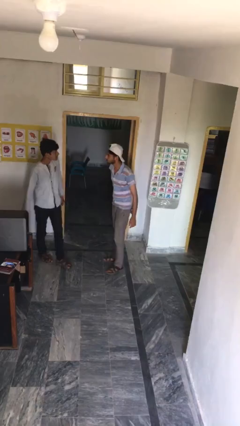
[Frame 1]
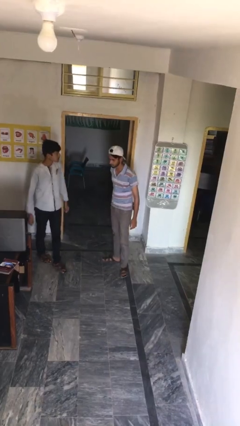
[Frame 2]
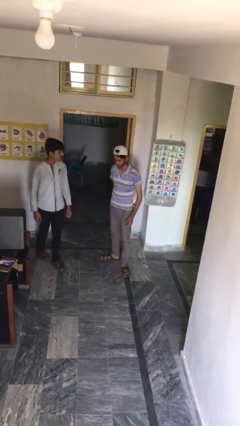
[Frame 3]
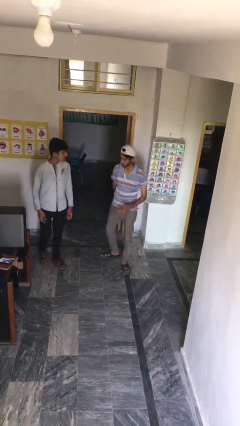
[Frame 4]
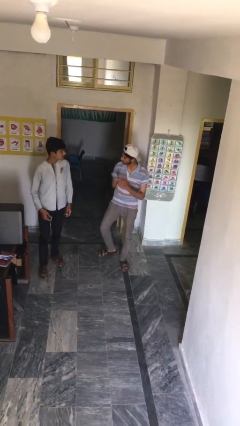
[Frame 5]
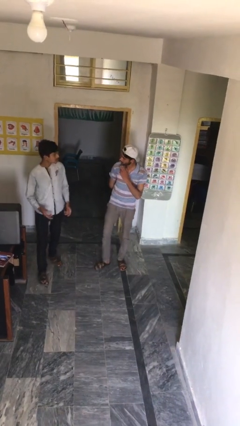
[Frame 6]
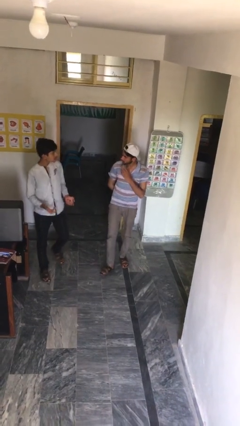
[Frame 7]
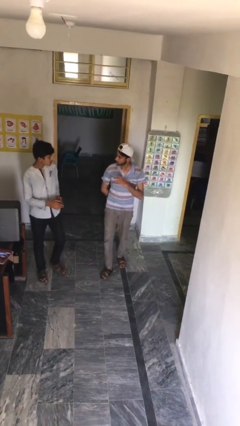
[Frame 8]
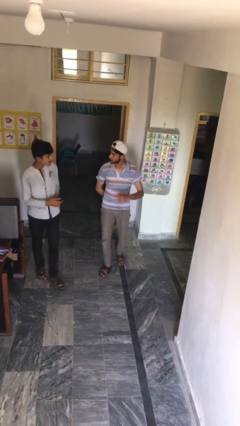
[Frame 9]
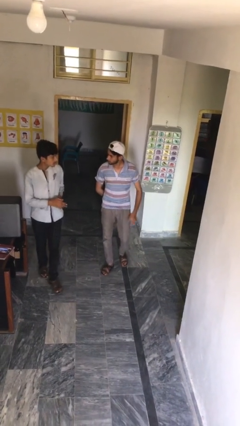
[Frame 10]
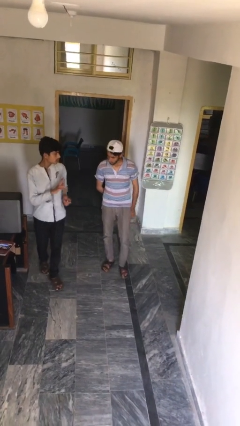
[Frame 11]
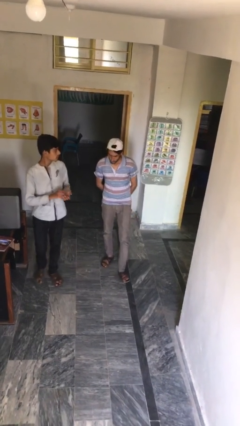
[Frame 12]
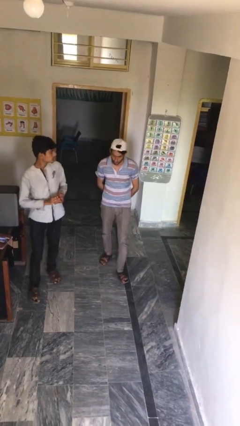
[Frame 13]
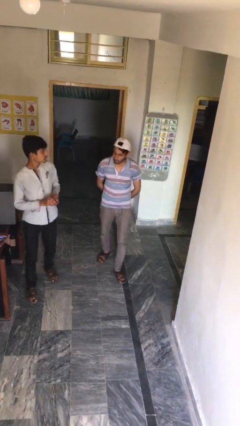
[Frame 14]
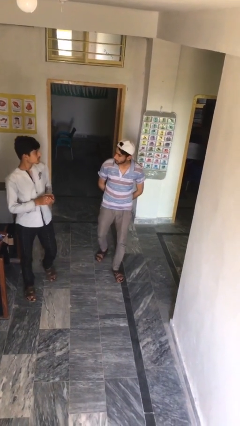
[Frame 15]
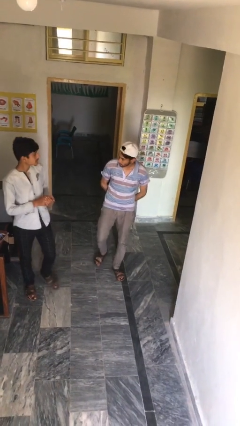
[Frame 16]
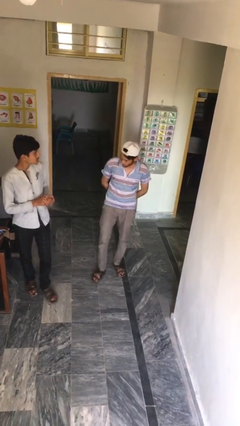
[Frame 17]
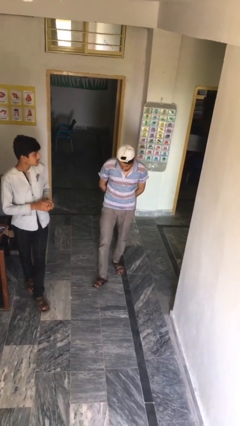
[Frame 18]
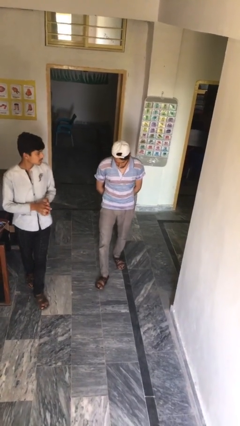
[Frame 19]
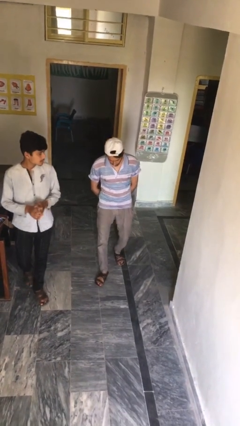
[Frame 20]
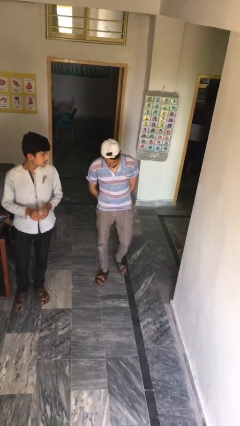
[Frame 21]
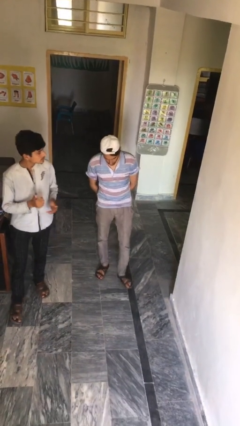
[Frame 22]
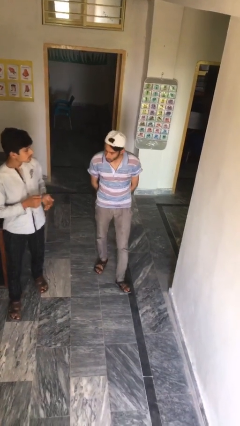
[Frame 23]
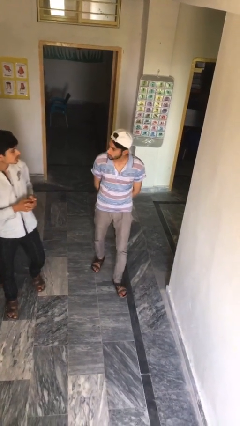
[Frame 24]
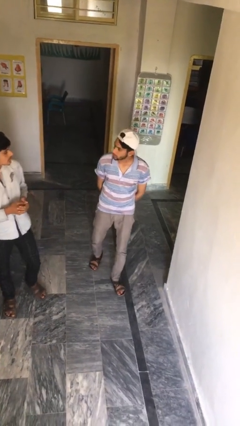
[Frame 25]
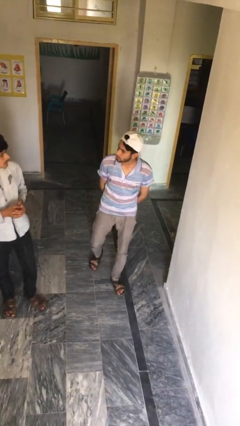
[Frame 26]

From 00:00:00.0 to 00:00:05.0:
person talks to person

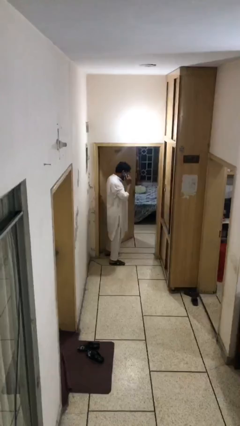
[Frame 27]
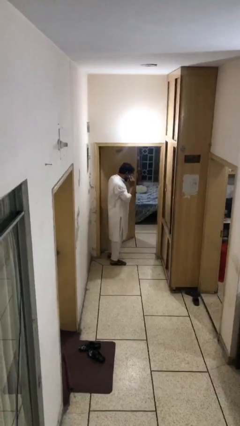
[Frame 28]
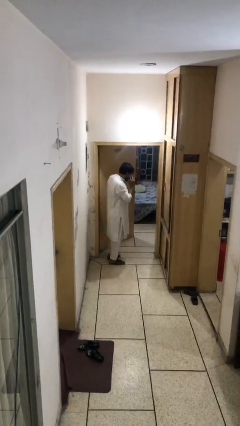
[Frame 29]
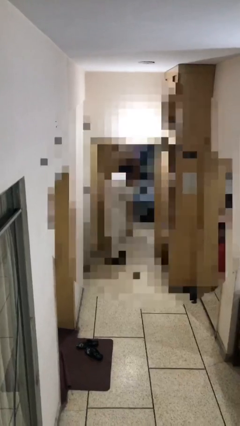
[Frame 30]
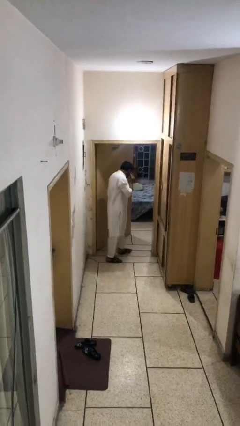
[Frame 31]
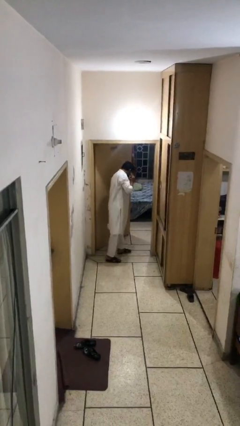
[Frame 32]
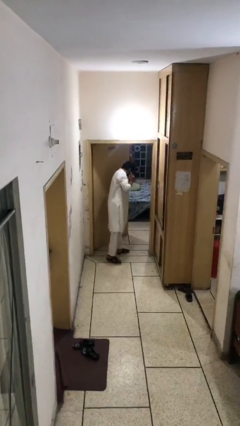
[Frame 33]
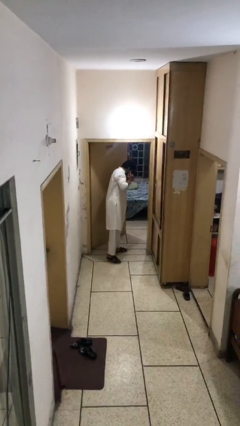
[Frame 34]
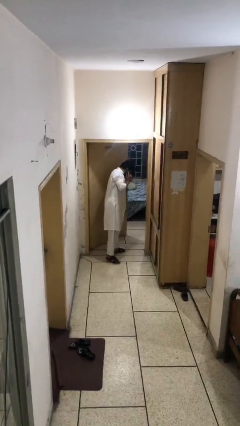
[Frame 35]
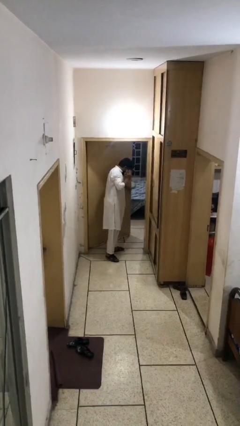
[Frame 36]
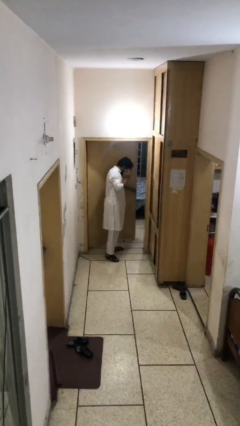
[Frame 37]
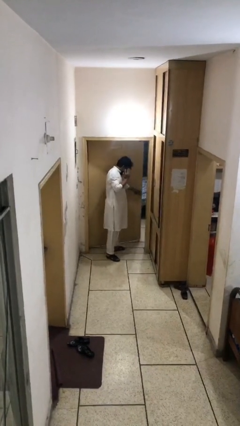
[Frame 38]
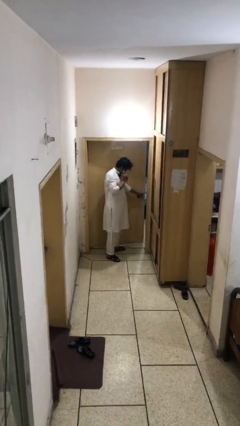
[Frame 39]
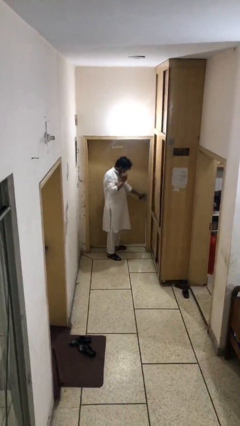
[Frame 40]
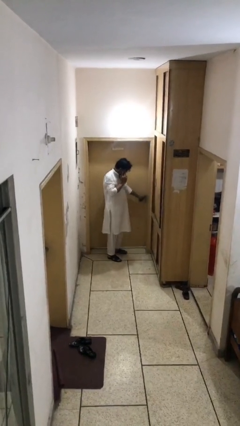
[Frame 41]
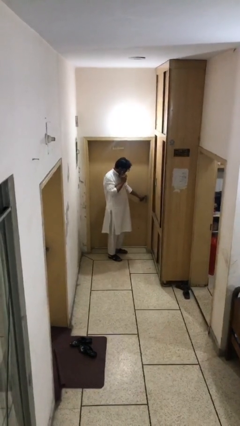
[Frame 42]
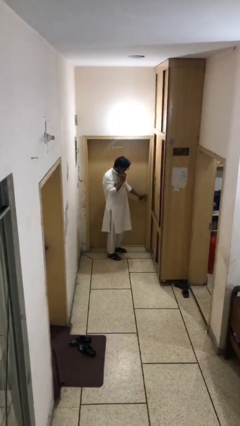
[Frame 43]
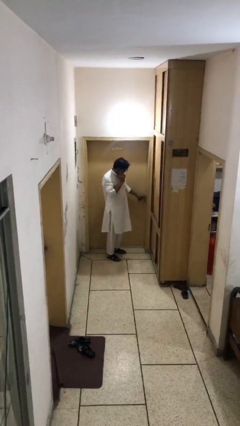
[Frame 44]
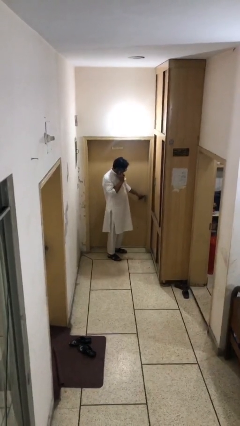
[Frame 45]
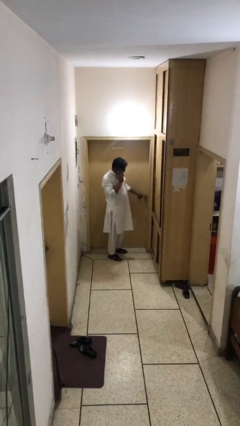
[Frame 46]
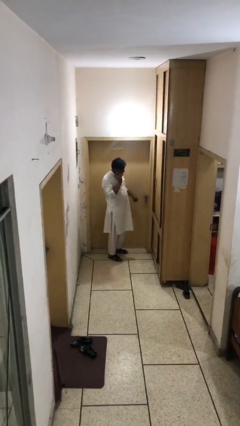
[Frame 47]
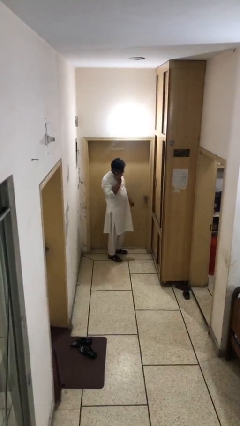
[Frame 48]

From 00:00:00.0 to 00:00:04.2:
person closes facility door

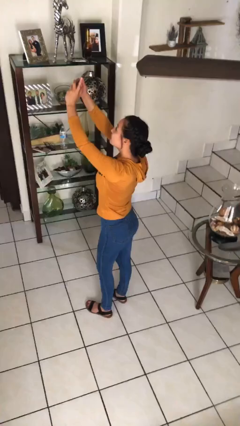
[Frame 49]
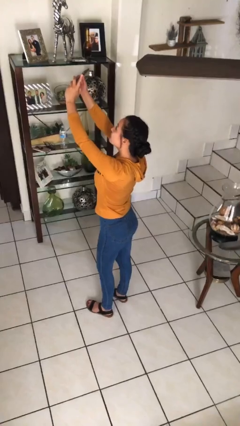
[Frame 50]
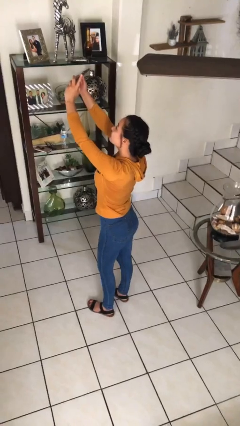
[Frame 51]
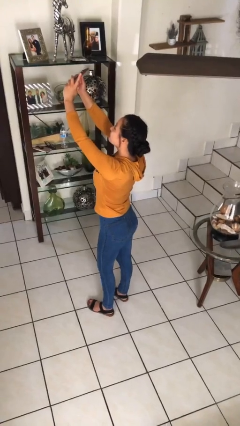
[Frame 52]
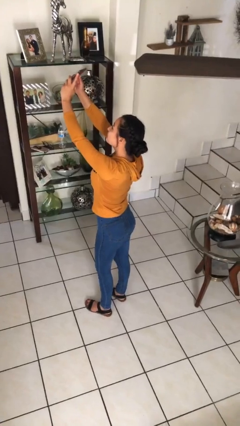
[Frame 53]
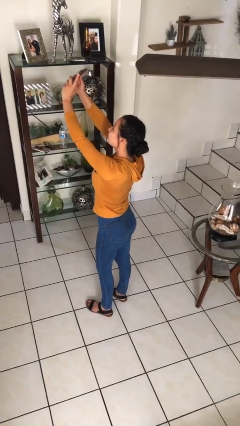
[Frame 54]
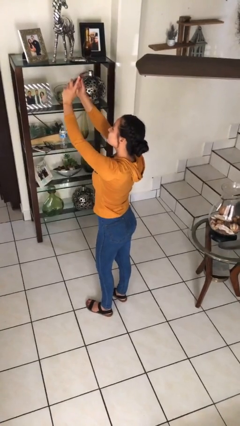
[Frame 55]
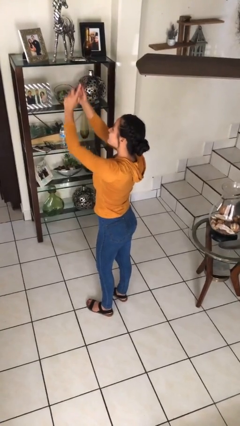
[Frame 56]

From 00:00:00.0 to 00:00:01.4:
person takes selfie

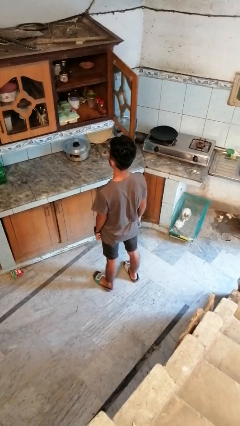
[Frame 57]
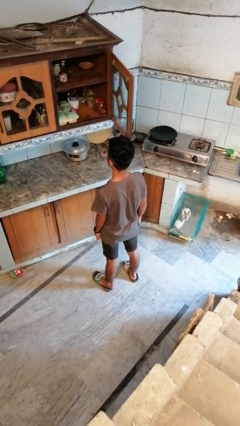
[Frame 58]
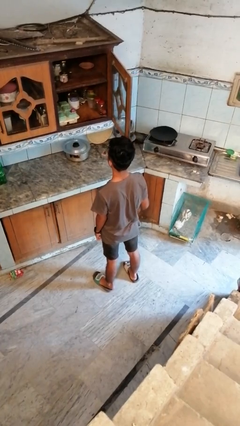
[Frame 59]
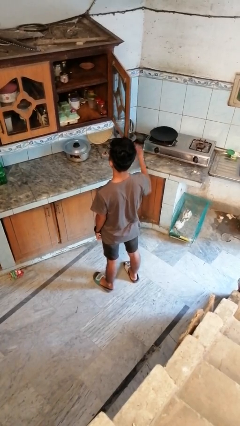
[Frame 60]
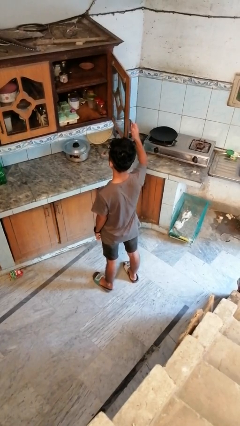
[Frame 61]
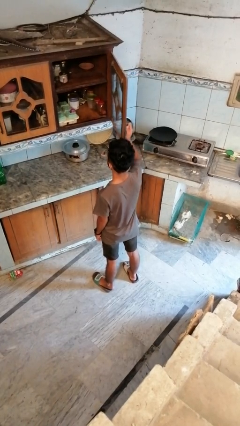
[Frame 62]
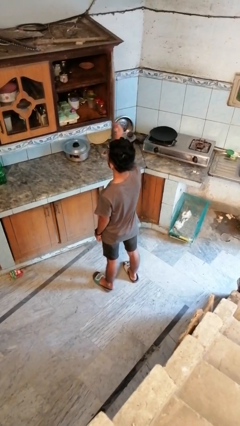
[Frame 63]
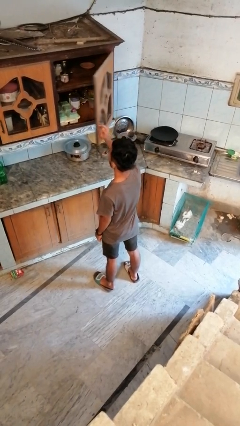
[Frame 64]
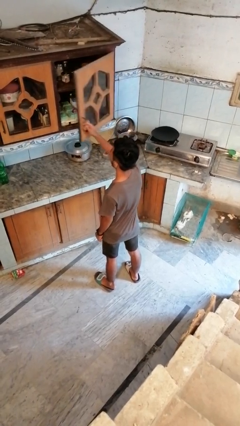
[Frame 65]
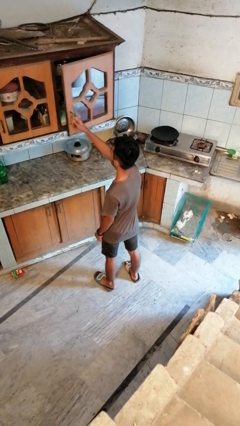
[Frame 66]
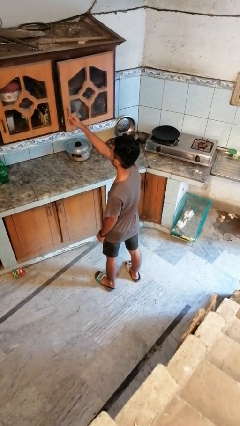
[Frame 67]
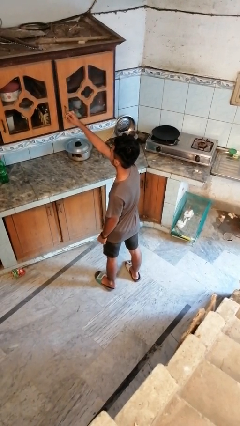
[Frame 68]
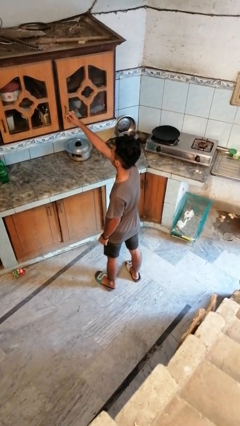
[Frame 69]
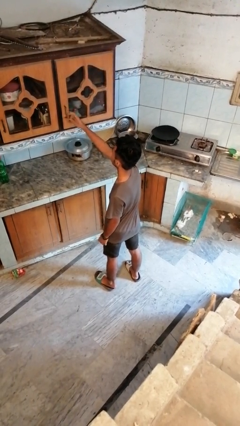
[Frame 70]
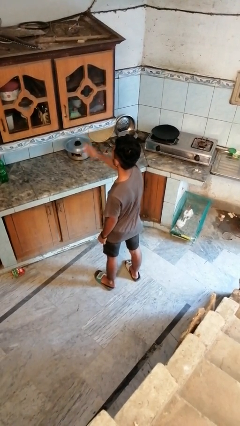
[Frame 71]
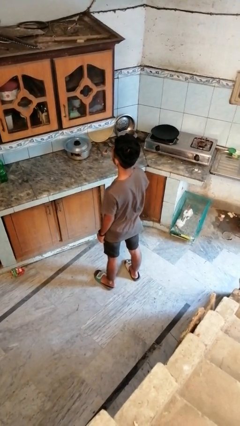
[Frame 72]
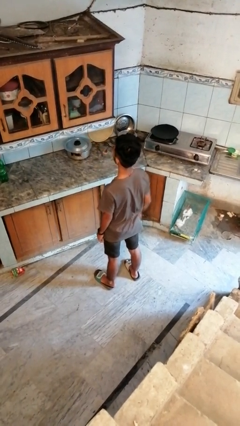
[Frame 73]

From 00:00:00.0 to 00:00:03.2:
person closes cabinet

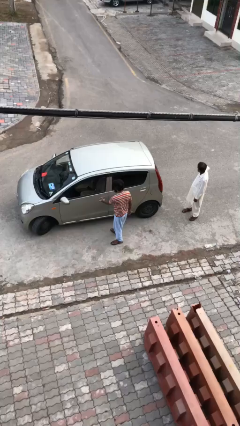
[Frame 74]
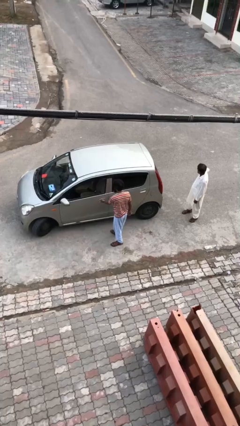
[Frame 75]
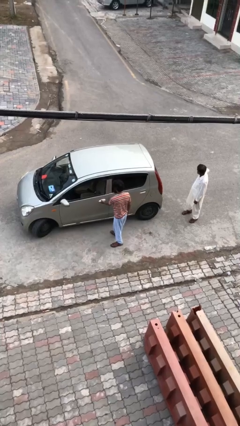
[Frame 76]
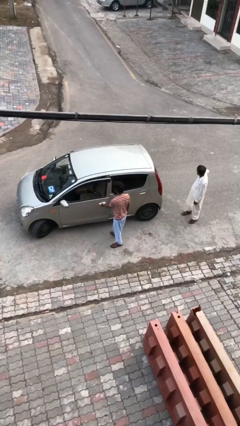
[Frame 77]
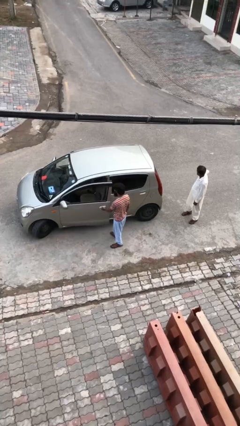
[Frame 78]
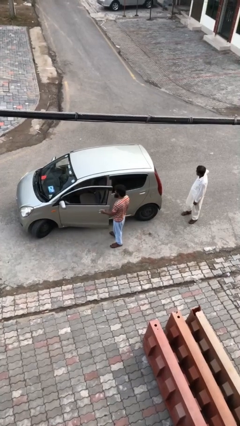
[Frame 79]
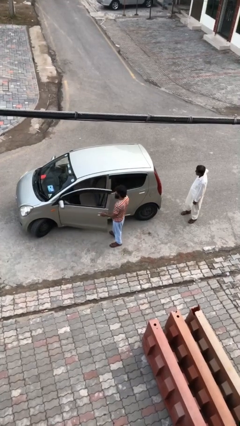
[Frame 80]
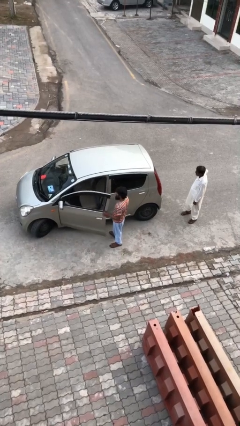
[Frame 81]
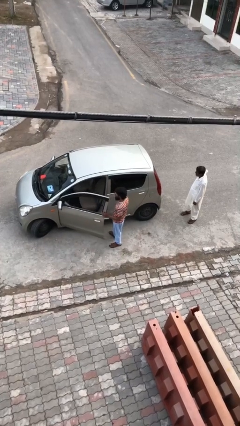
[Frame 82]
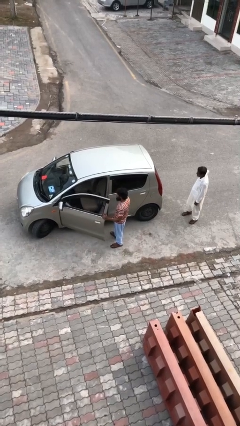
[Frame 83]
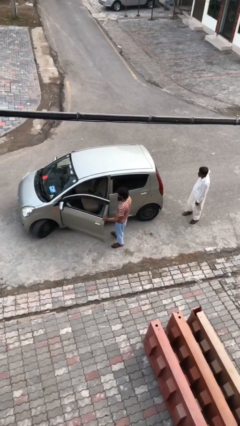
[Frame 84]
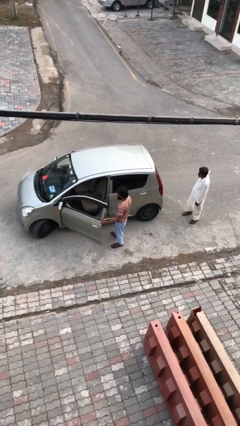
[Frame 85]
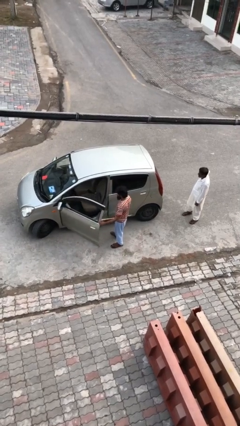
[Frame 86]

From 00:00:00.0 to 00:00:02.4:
person opens car door

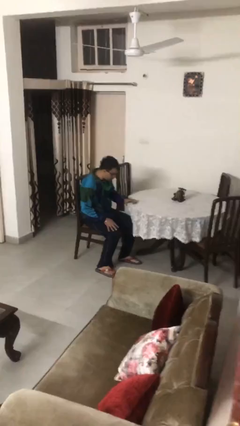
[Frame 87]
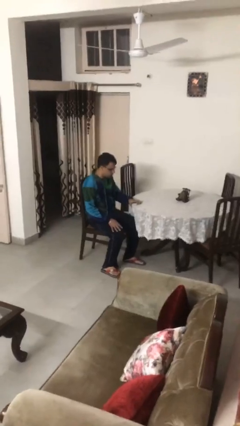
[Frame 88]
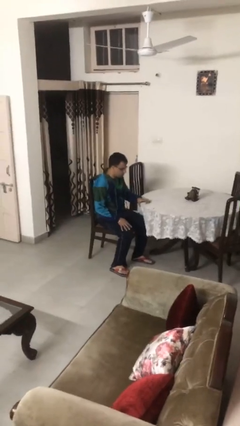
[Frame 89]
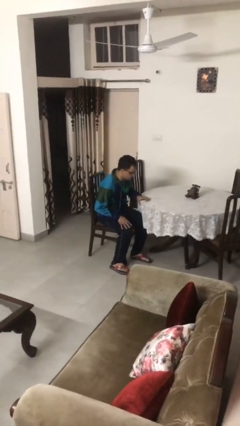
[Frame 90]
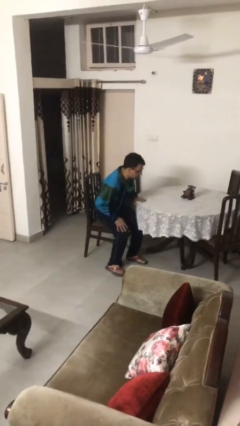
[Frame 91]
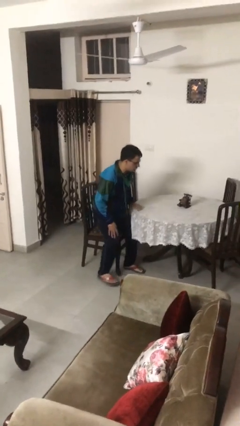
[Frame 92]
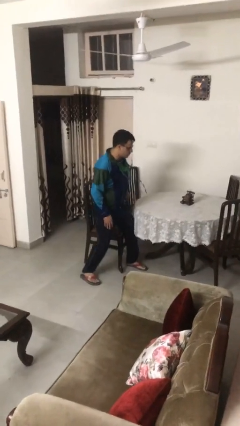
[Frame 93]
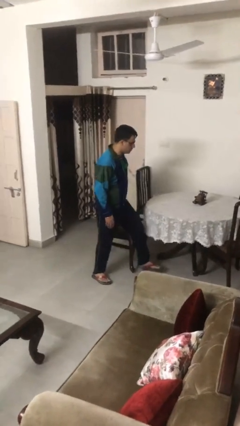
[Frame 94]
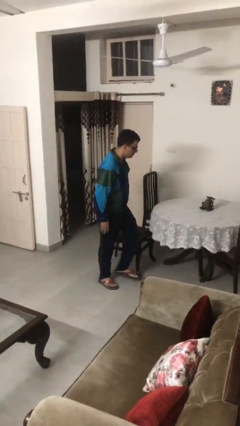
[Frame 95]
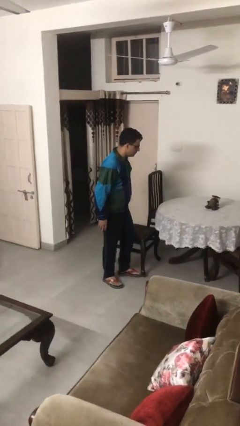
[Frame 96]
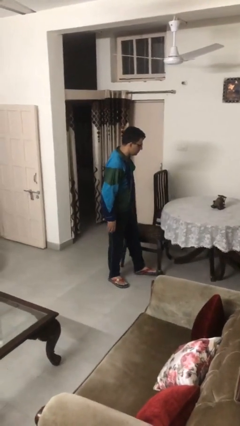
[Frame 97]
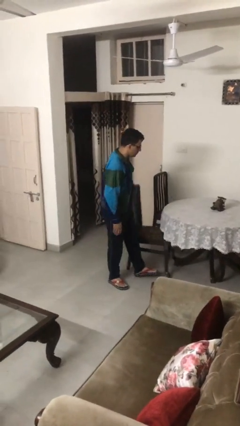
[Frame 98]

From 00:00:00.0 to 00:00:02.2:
person stands up
